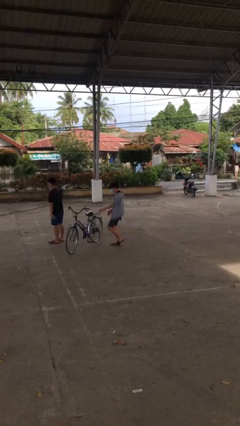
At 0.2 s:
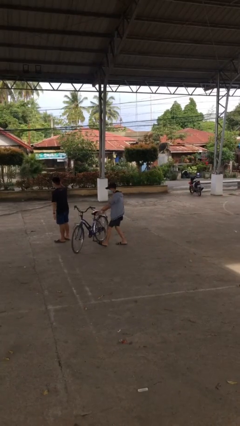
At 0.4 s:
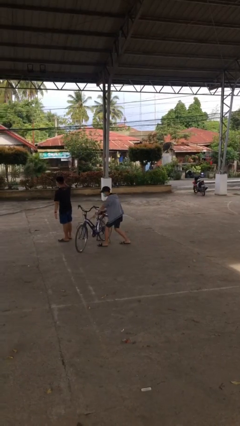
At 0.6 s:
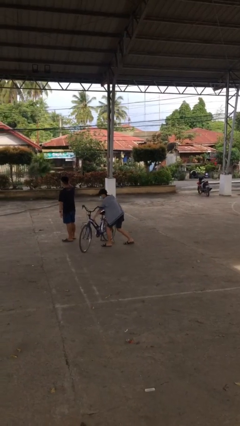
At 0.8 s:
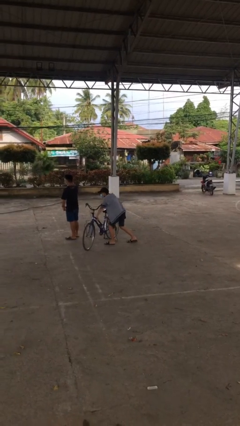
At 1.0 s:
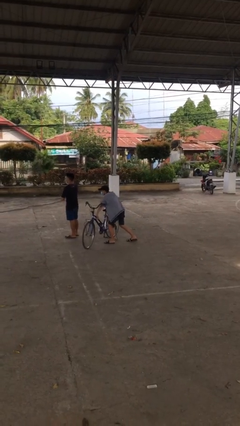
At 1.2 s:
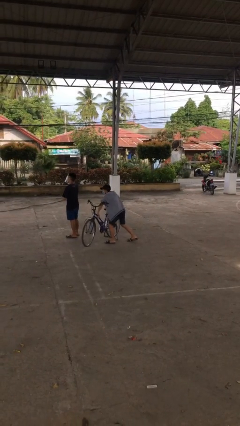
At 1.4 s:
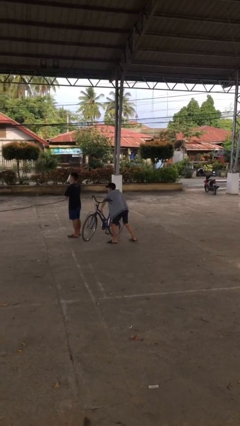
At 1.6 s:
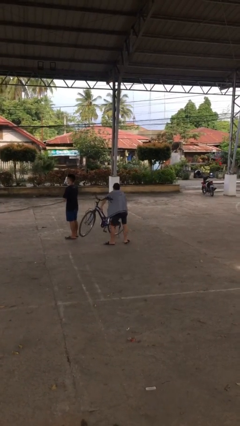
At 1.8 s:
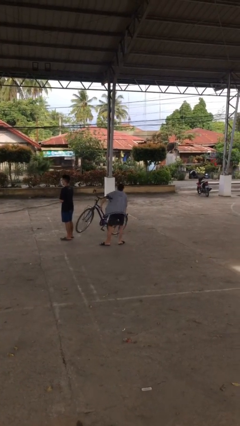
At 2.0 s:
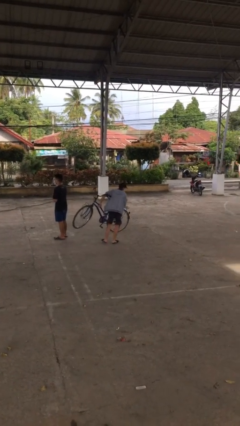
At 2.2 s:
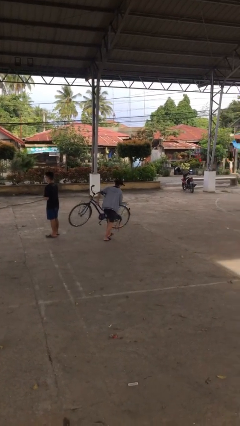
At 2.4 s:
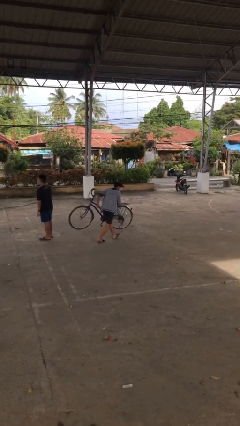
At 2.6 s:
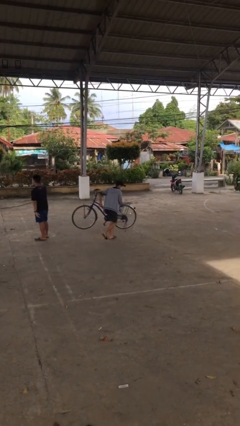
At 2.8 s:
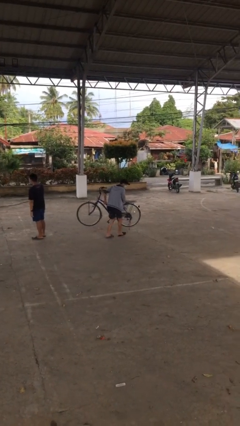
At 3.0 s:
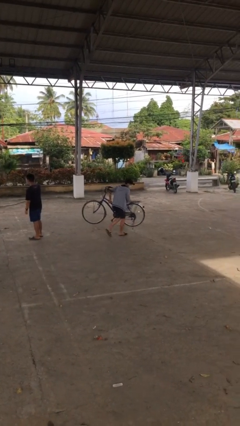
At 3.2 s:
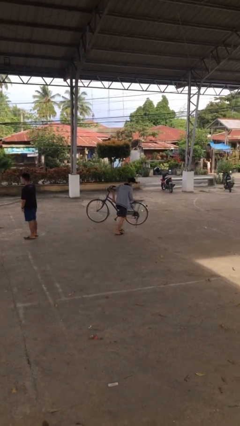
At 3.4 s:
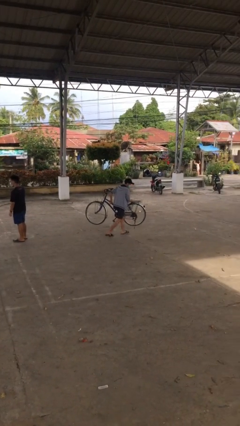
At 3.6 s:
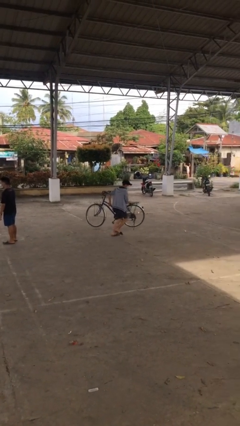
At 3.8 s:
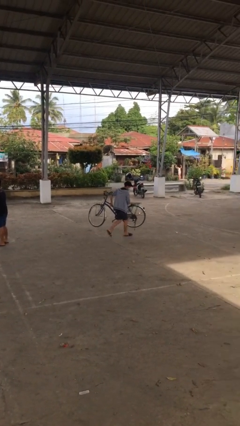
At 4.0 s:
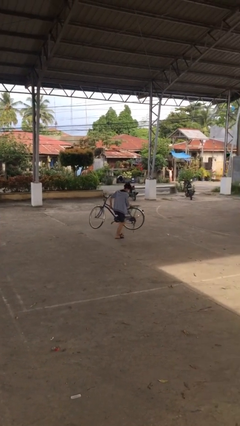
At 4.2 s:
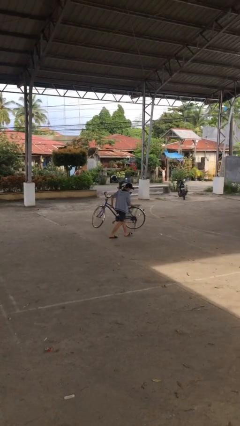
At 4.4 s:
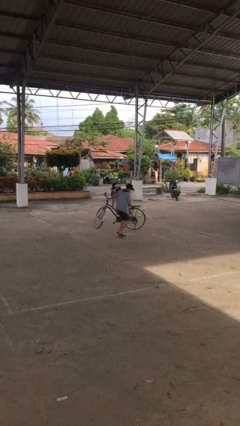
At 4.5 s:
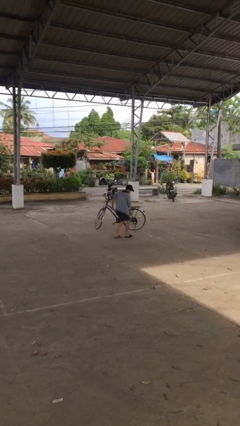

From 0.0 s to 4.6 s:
person steals object from person

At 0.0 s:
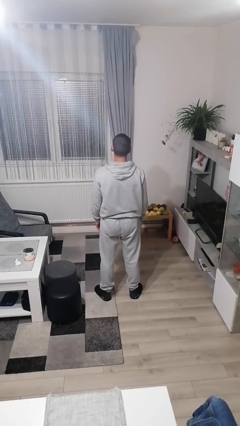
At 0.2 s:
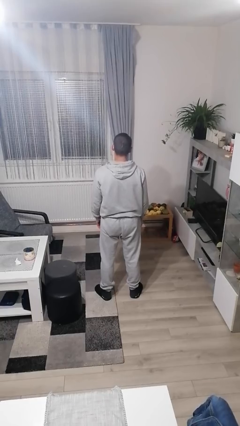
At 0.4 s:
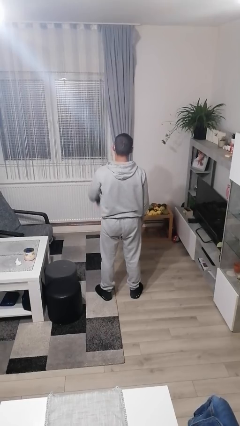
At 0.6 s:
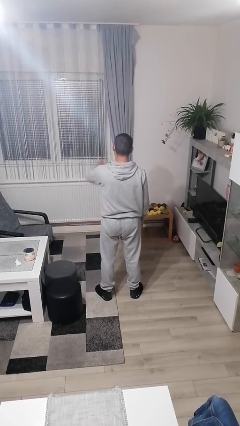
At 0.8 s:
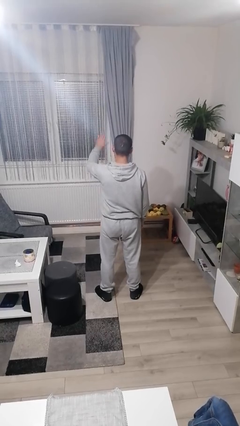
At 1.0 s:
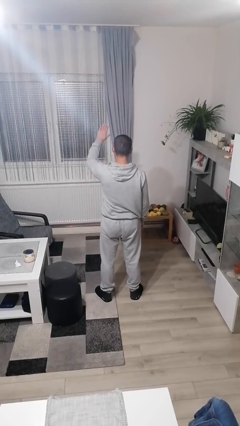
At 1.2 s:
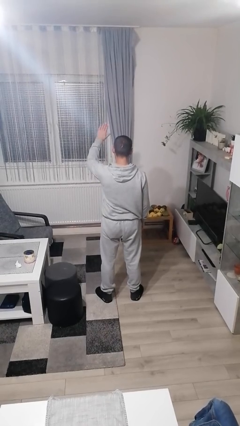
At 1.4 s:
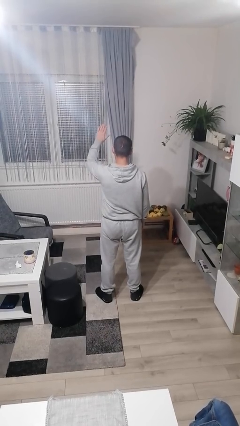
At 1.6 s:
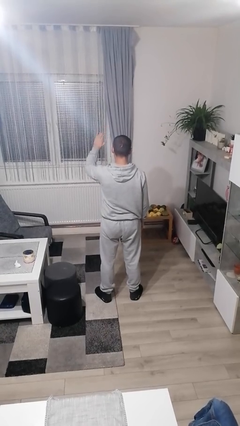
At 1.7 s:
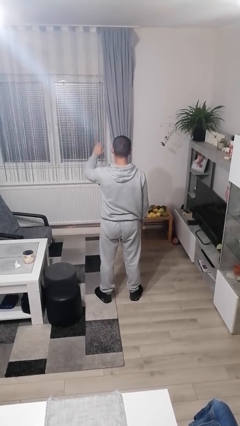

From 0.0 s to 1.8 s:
person salutes

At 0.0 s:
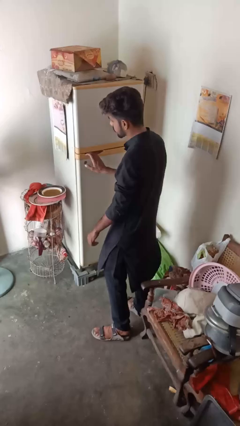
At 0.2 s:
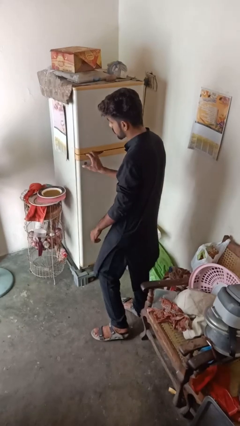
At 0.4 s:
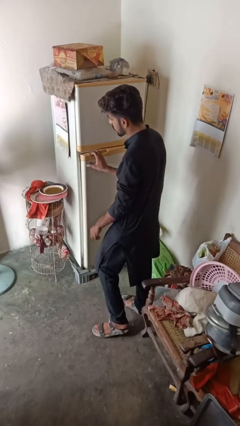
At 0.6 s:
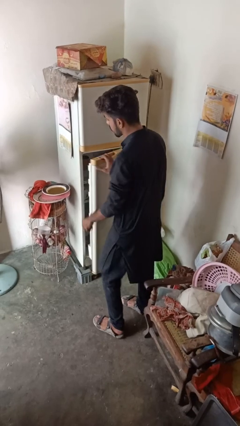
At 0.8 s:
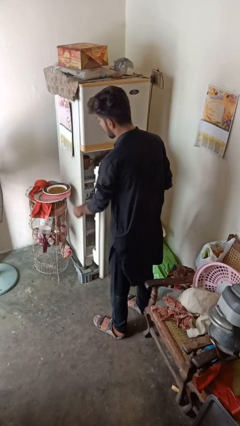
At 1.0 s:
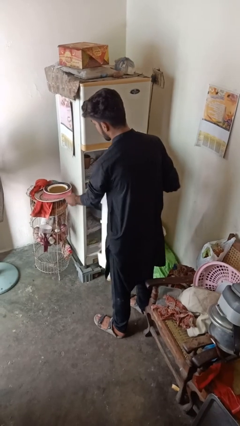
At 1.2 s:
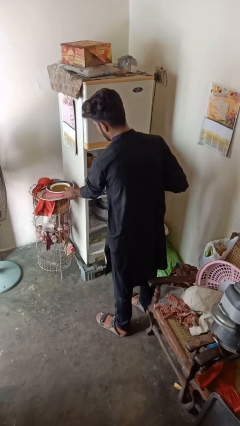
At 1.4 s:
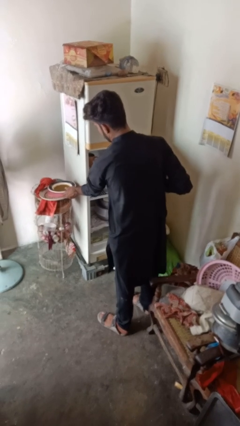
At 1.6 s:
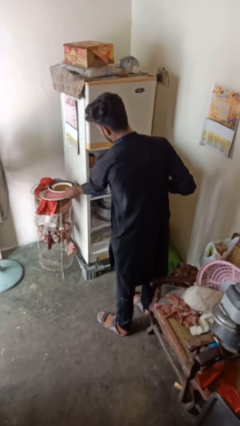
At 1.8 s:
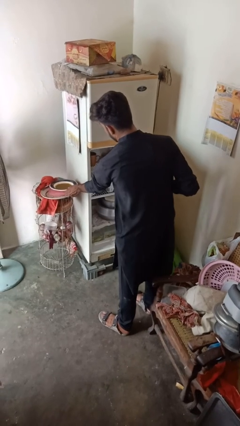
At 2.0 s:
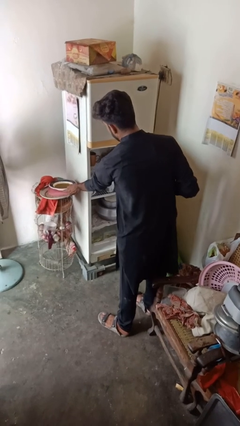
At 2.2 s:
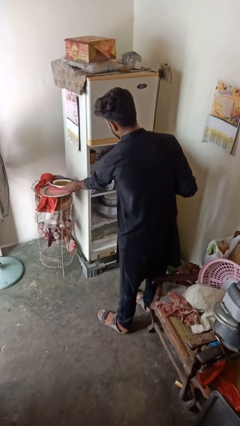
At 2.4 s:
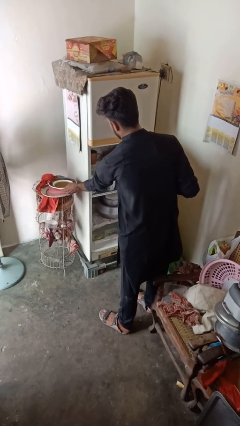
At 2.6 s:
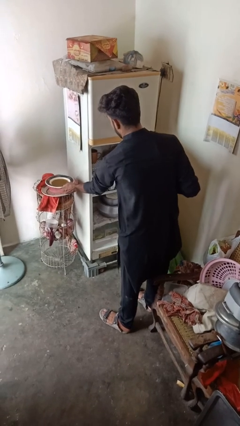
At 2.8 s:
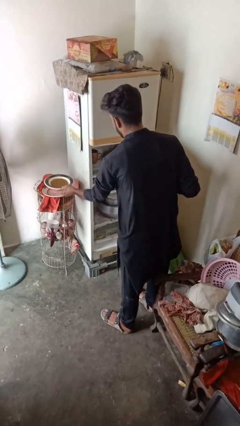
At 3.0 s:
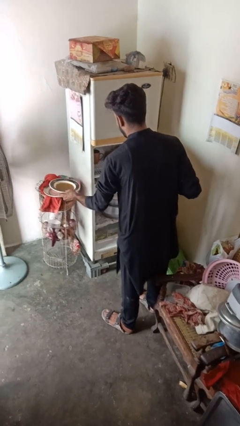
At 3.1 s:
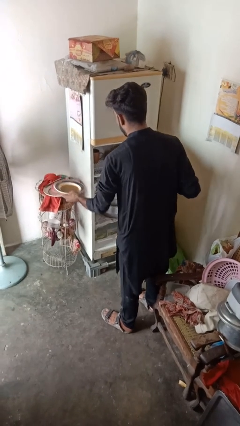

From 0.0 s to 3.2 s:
person opens refrigerator

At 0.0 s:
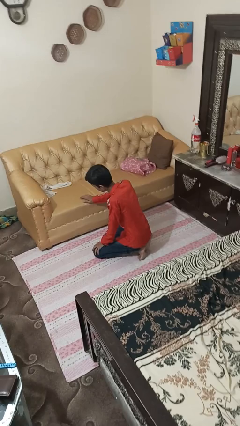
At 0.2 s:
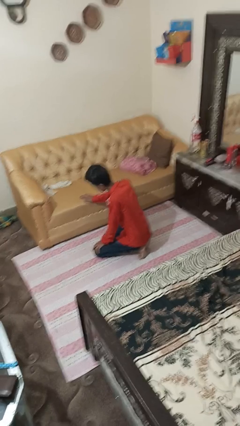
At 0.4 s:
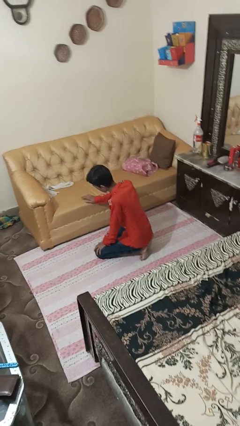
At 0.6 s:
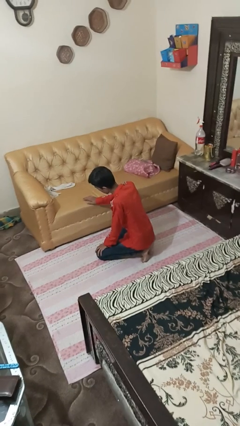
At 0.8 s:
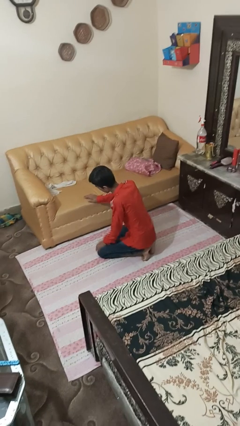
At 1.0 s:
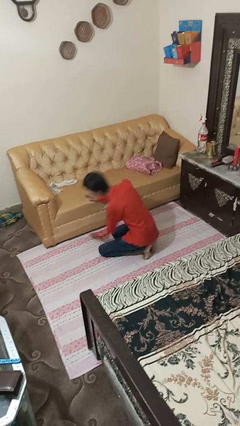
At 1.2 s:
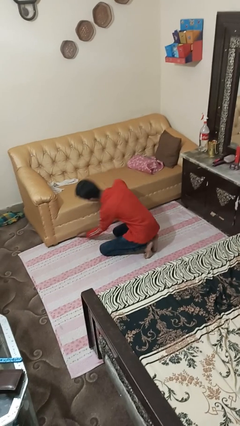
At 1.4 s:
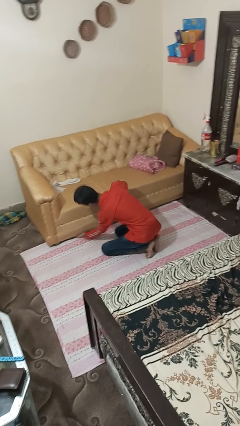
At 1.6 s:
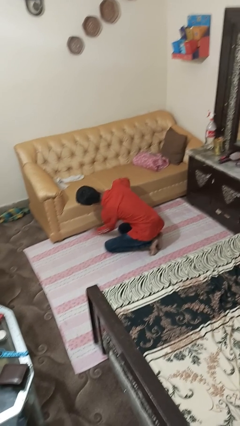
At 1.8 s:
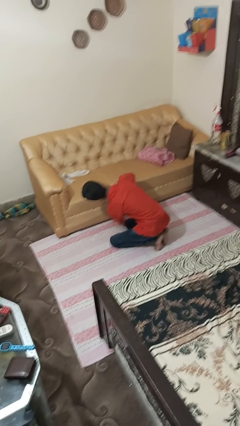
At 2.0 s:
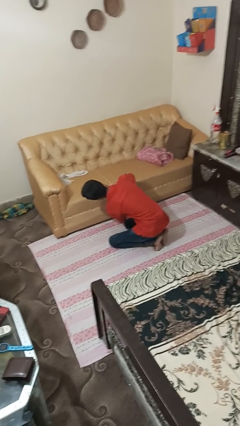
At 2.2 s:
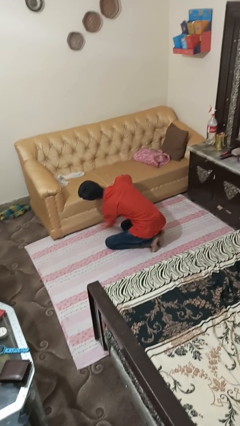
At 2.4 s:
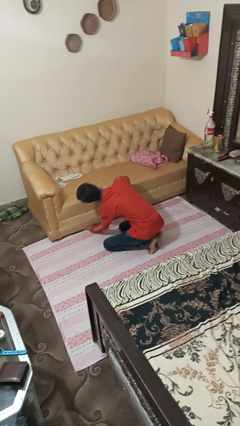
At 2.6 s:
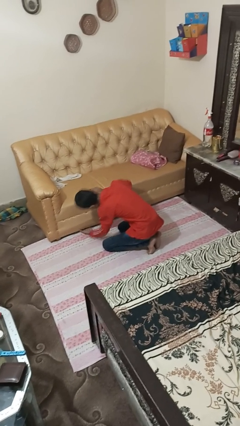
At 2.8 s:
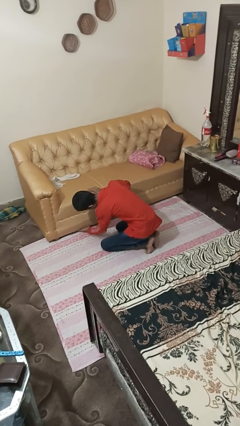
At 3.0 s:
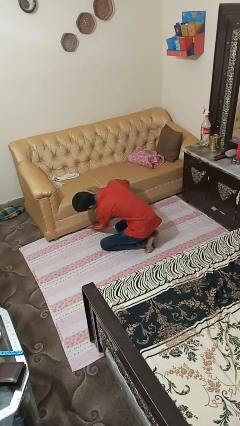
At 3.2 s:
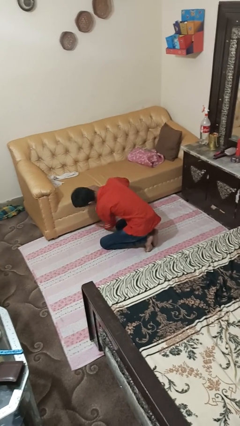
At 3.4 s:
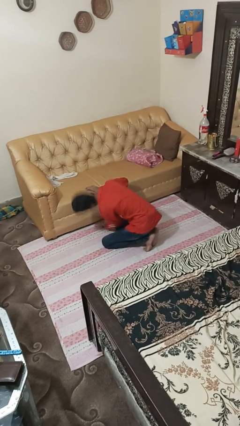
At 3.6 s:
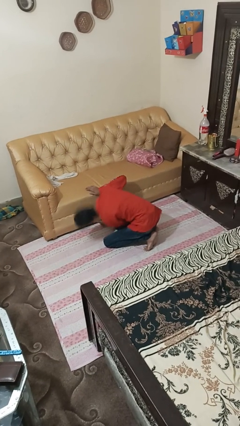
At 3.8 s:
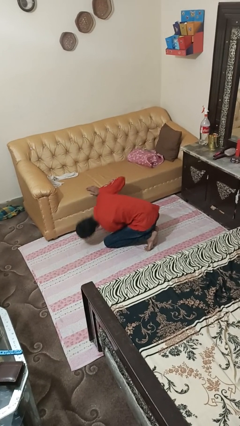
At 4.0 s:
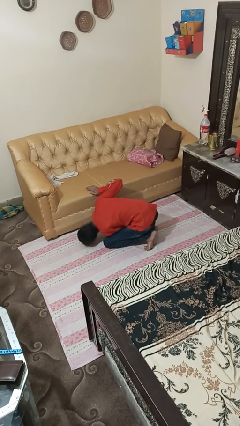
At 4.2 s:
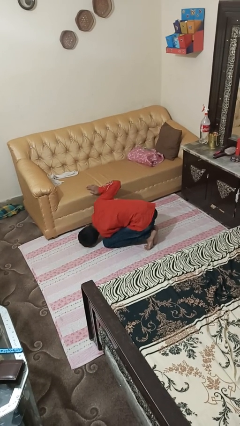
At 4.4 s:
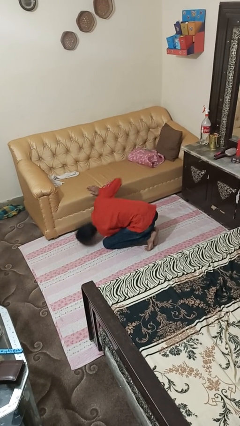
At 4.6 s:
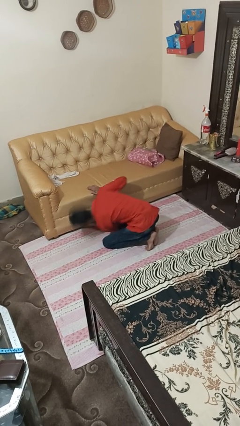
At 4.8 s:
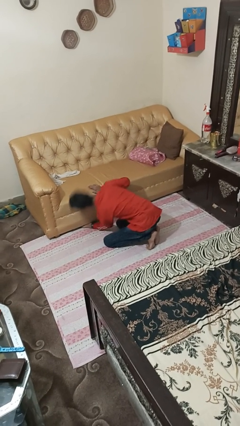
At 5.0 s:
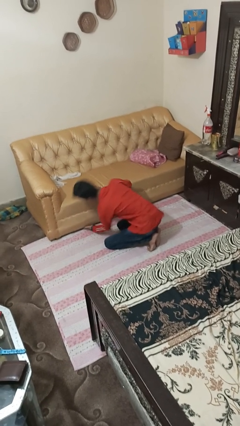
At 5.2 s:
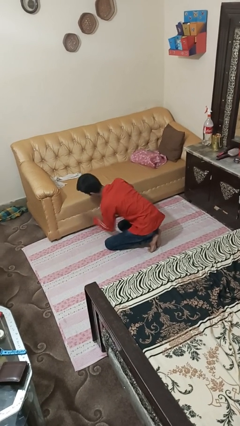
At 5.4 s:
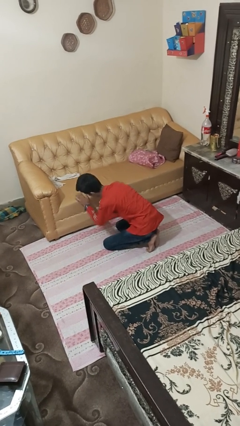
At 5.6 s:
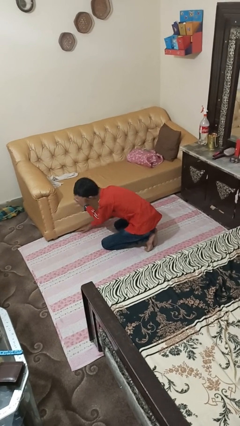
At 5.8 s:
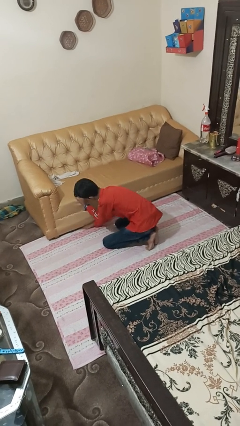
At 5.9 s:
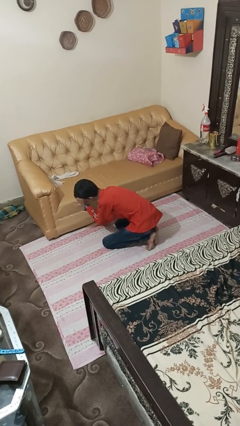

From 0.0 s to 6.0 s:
person searches under couch

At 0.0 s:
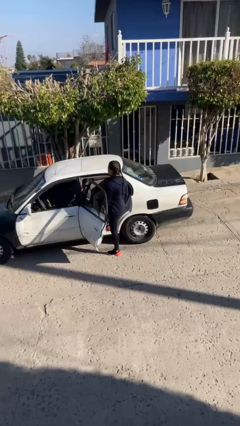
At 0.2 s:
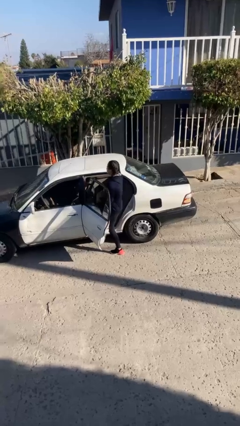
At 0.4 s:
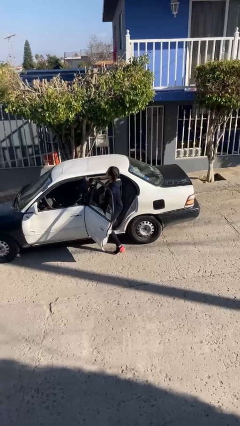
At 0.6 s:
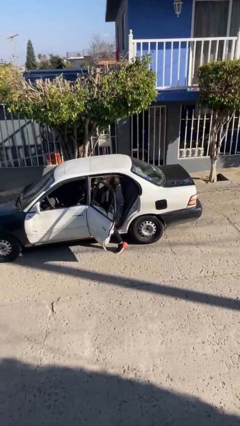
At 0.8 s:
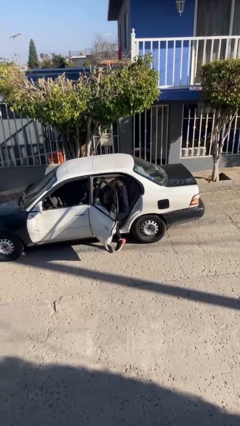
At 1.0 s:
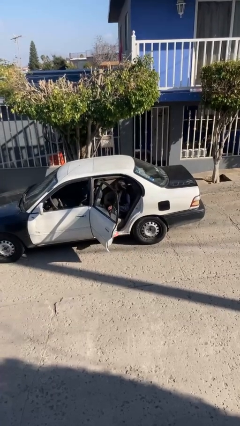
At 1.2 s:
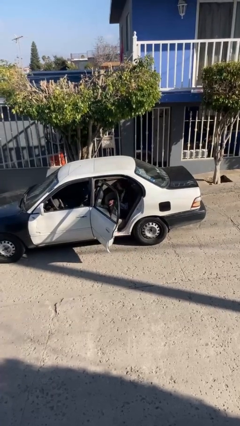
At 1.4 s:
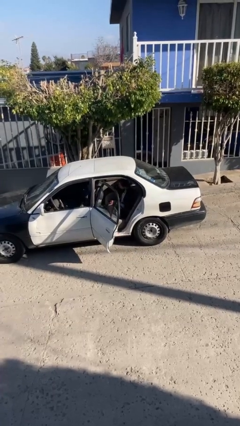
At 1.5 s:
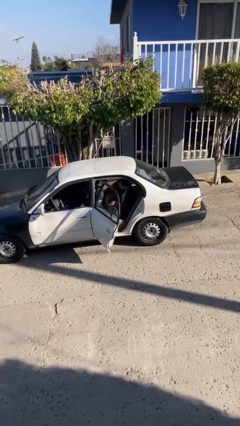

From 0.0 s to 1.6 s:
person enters car
